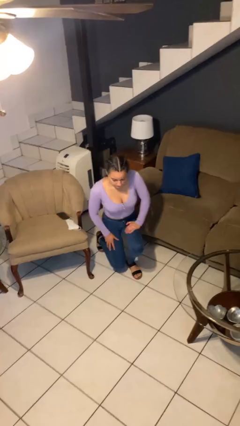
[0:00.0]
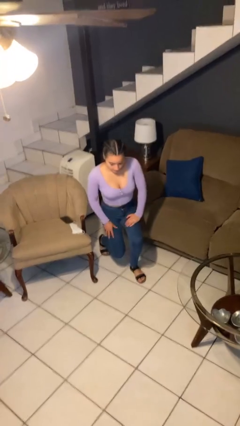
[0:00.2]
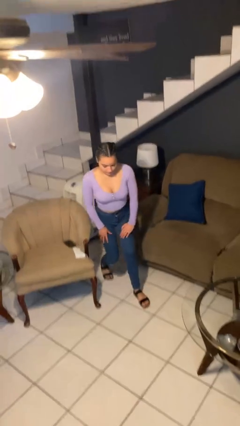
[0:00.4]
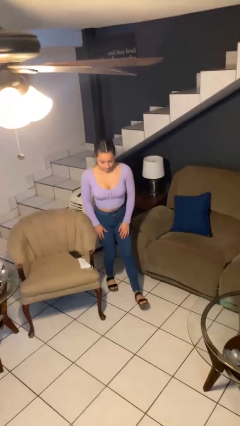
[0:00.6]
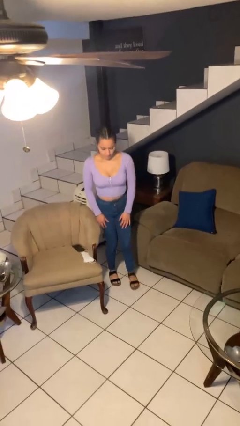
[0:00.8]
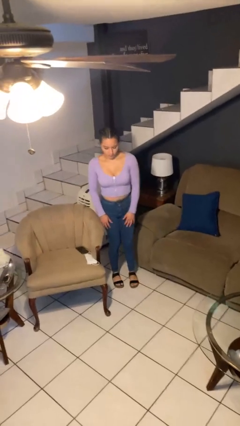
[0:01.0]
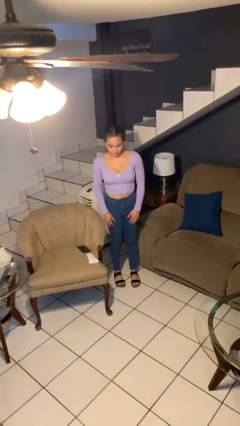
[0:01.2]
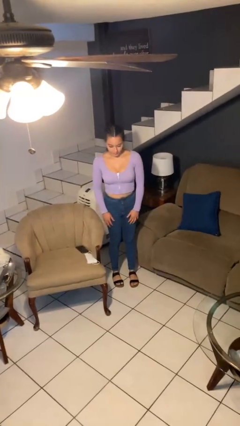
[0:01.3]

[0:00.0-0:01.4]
person stands up from floor

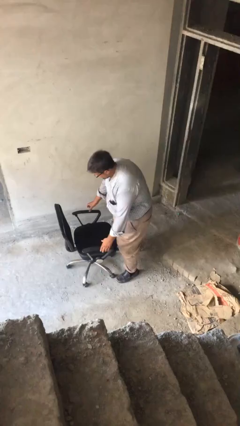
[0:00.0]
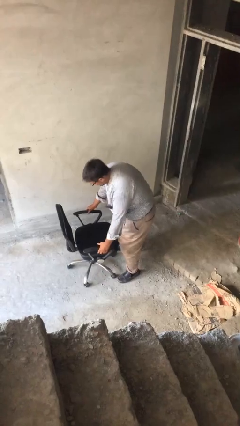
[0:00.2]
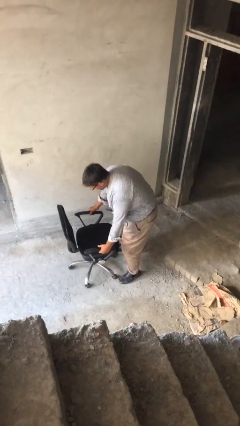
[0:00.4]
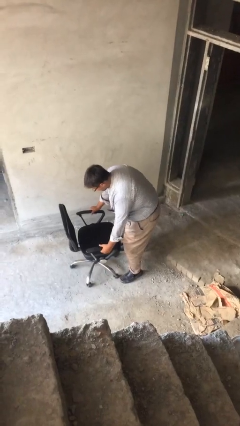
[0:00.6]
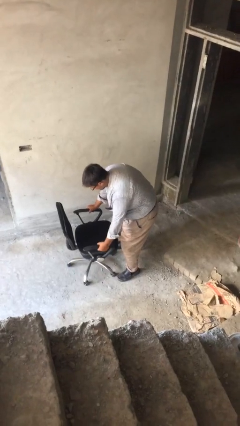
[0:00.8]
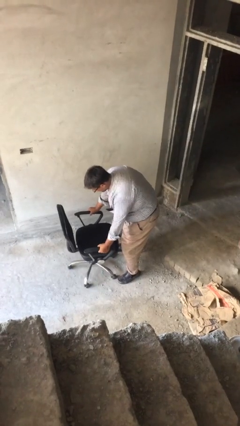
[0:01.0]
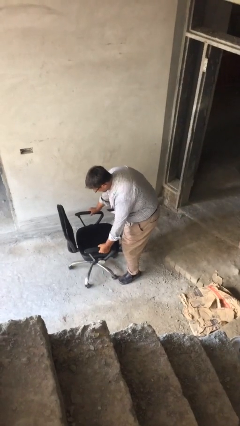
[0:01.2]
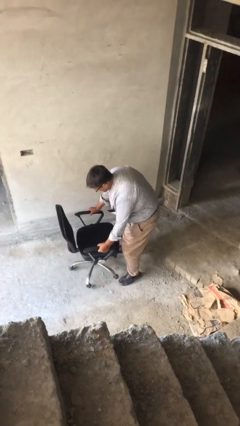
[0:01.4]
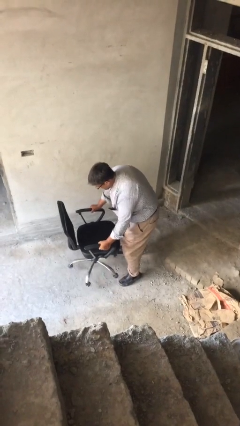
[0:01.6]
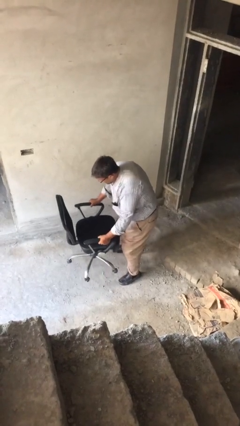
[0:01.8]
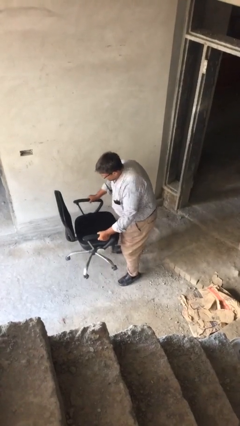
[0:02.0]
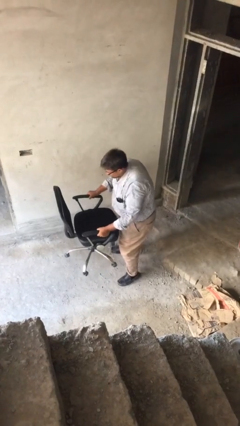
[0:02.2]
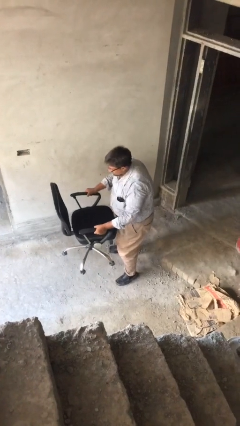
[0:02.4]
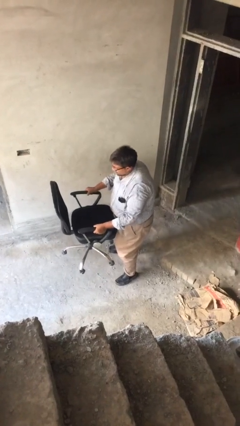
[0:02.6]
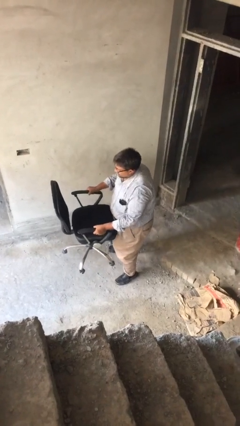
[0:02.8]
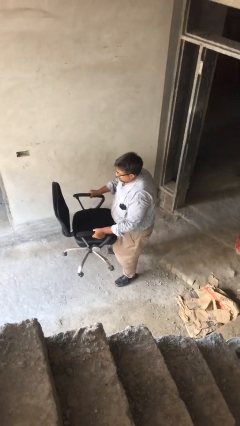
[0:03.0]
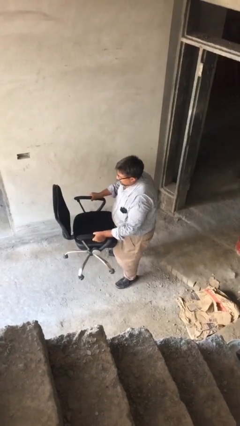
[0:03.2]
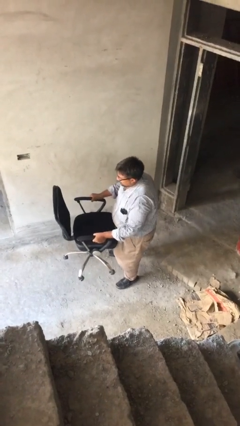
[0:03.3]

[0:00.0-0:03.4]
person picks up object from floor

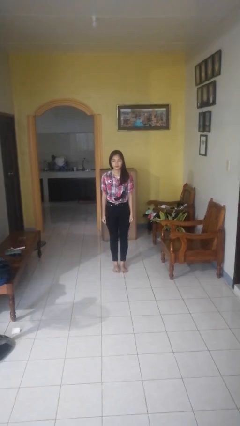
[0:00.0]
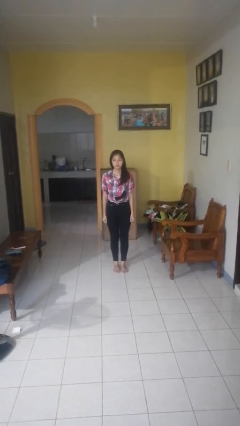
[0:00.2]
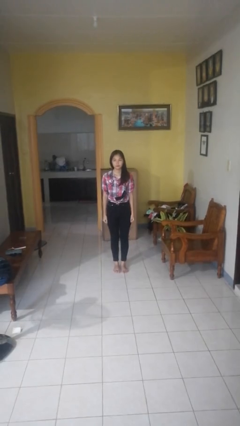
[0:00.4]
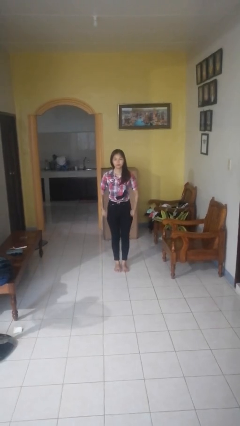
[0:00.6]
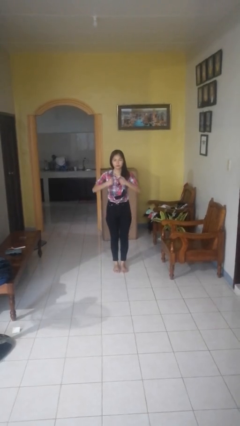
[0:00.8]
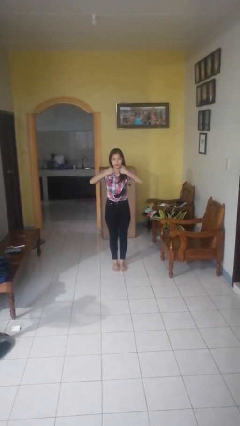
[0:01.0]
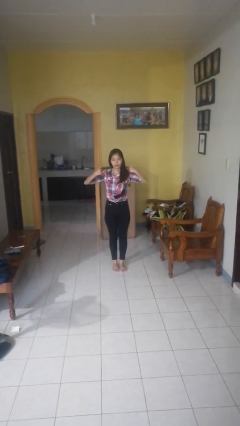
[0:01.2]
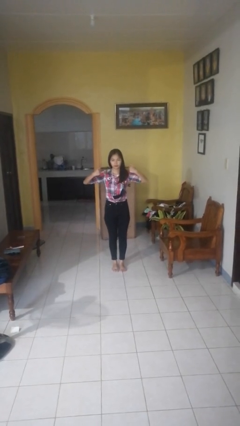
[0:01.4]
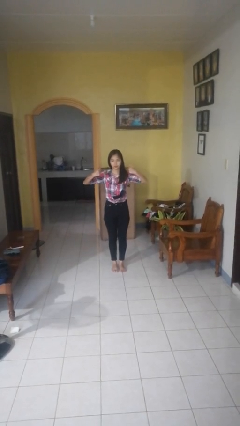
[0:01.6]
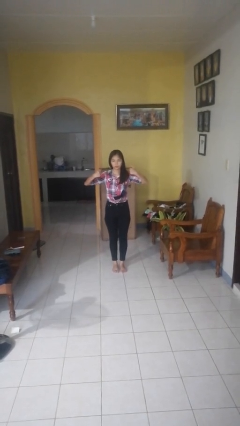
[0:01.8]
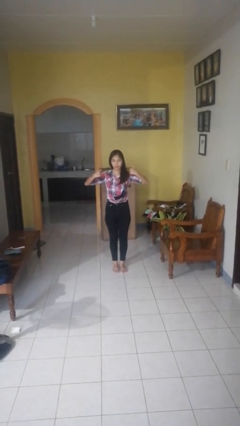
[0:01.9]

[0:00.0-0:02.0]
person gestures zoom in

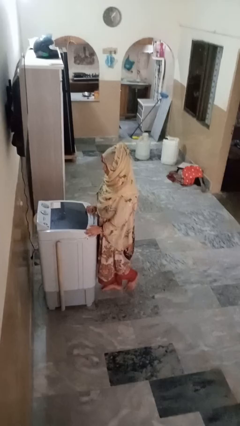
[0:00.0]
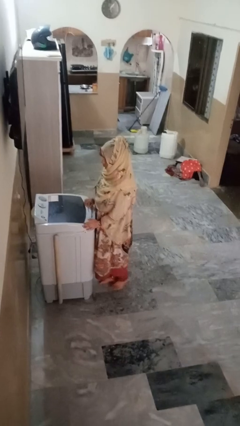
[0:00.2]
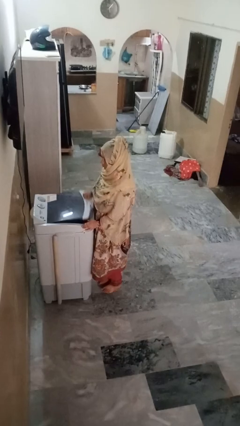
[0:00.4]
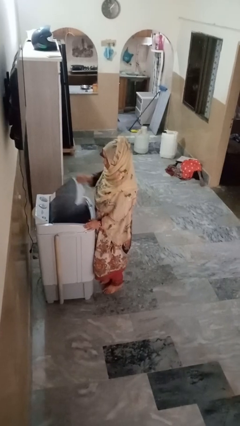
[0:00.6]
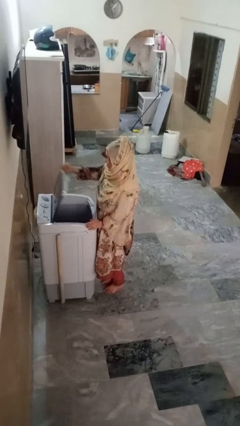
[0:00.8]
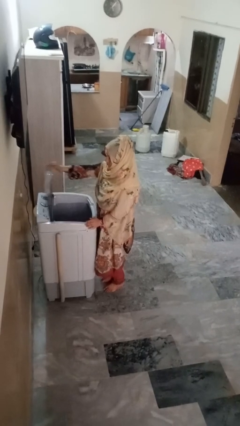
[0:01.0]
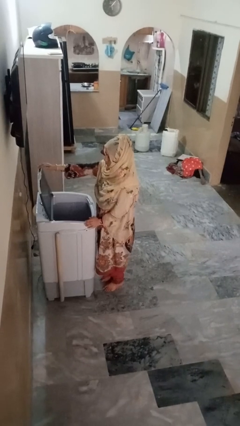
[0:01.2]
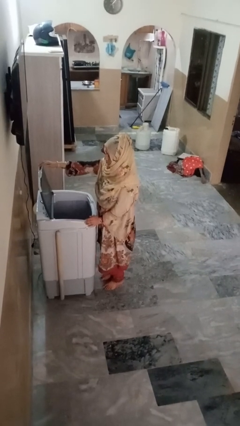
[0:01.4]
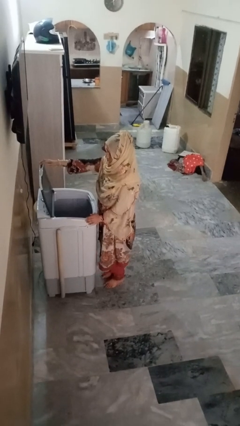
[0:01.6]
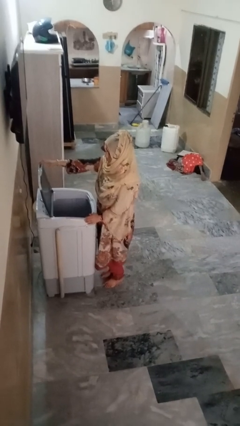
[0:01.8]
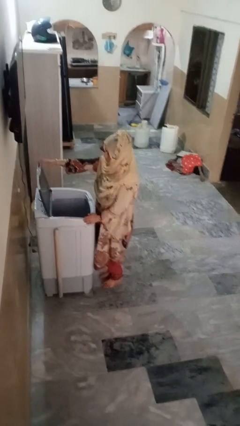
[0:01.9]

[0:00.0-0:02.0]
person opens clothes washer

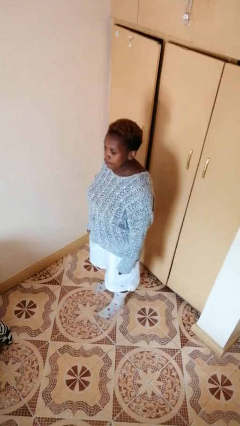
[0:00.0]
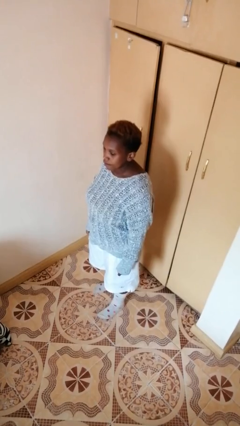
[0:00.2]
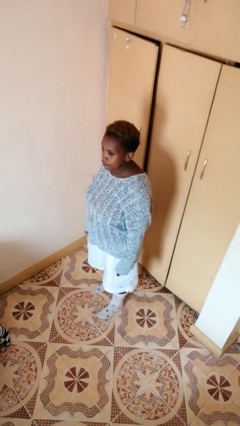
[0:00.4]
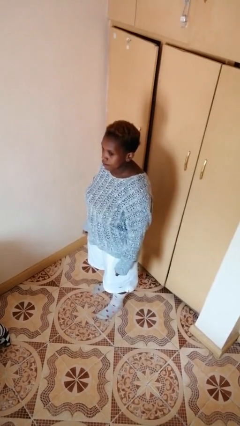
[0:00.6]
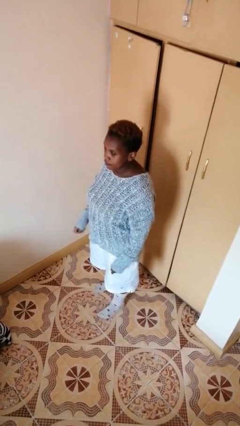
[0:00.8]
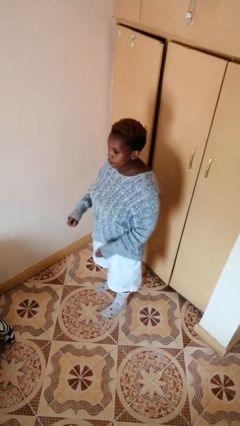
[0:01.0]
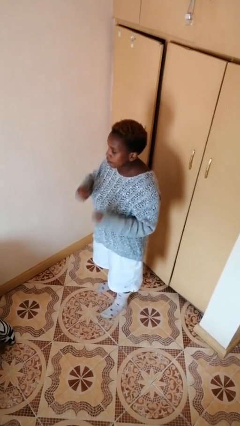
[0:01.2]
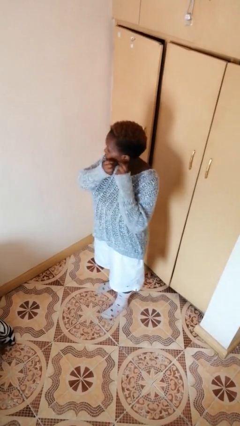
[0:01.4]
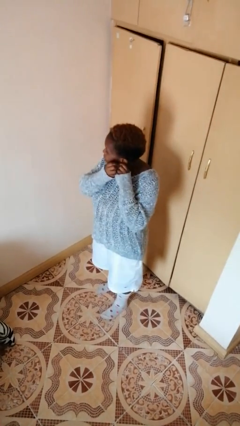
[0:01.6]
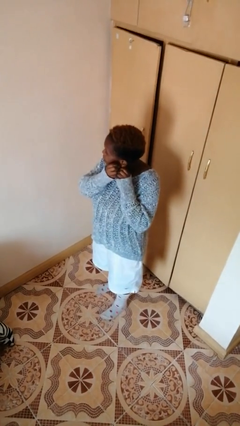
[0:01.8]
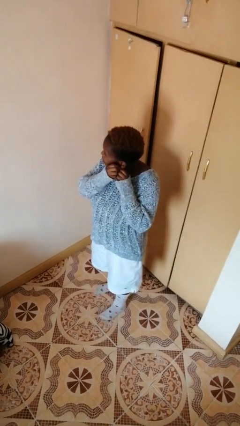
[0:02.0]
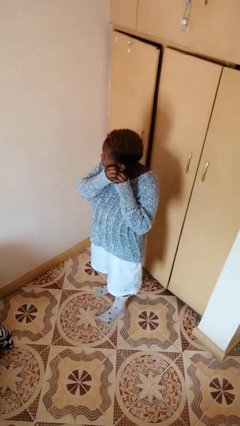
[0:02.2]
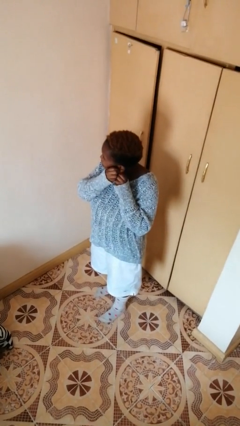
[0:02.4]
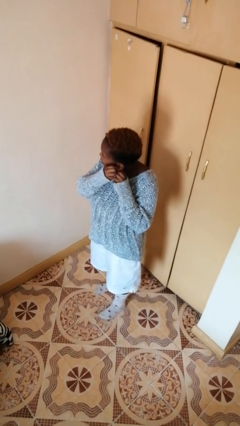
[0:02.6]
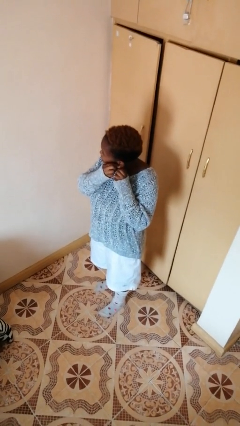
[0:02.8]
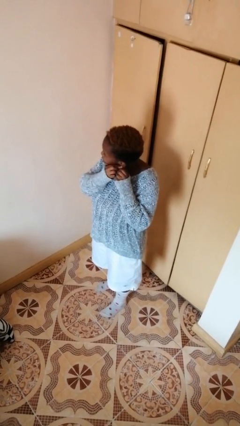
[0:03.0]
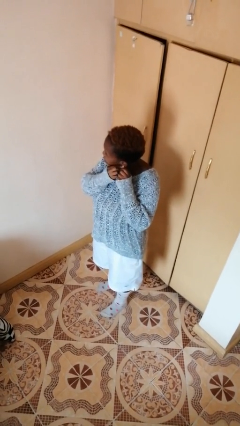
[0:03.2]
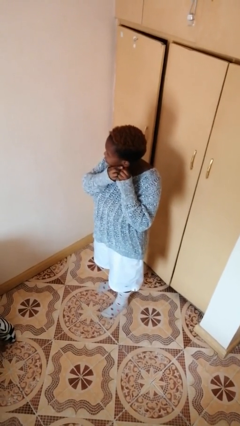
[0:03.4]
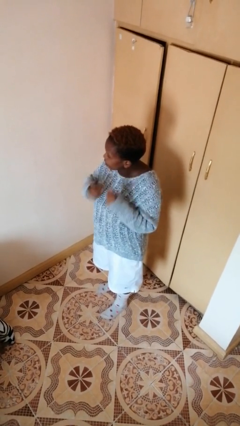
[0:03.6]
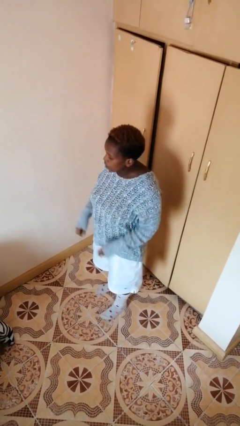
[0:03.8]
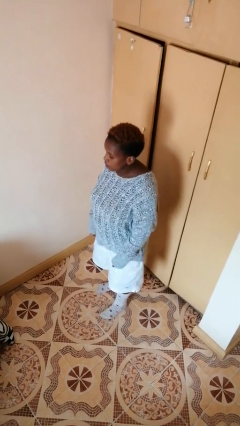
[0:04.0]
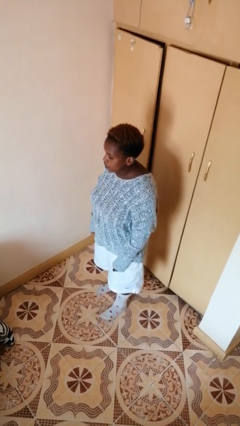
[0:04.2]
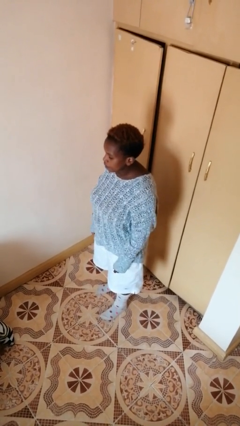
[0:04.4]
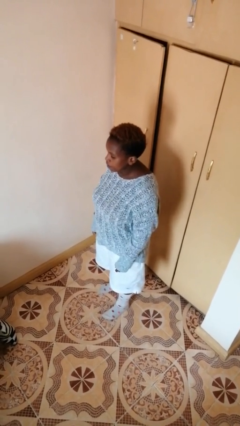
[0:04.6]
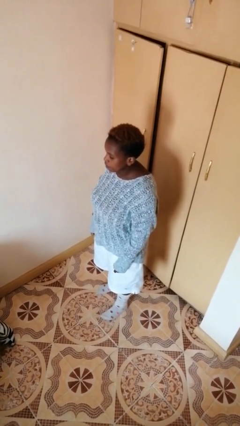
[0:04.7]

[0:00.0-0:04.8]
person puts on earrings

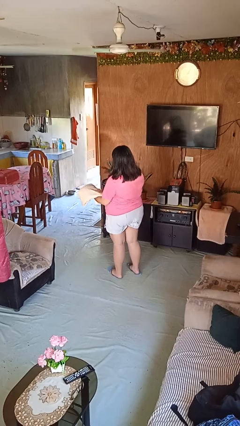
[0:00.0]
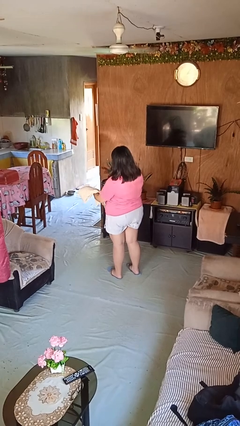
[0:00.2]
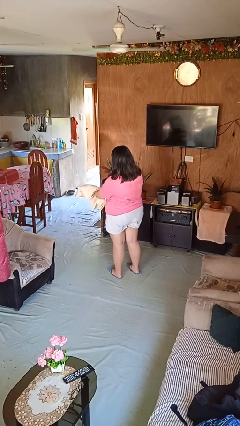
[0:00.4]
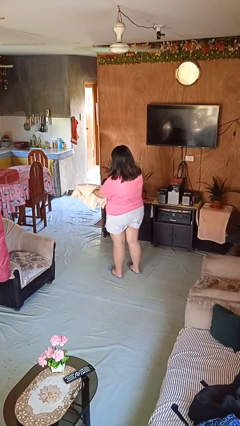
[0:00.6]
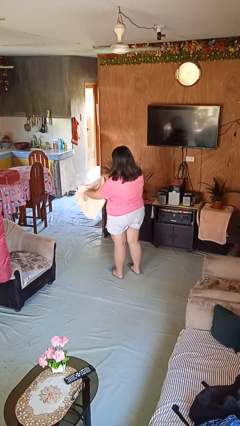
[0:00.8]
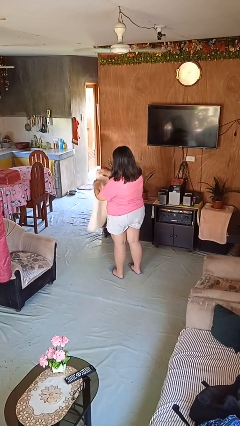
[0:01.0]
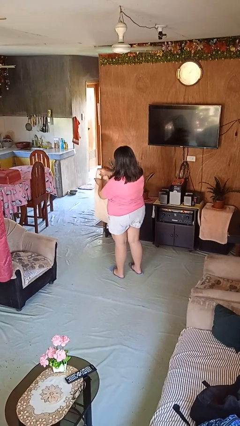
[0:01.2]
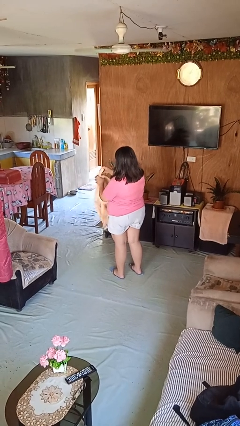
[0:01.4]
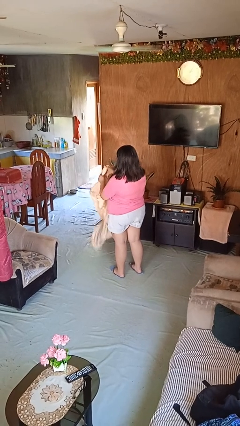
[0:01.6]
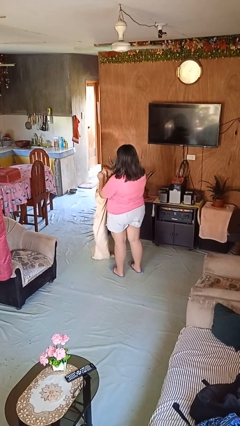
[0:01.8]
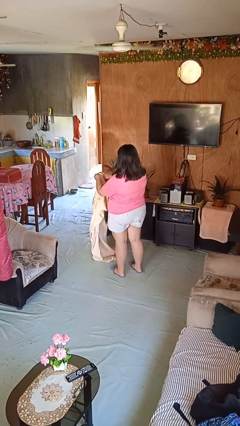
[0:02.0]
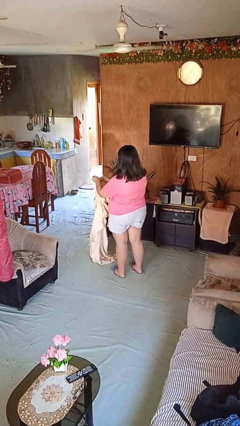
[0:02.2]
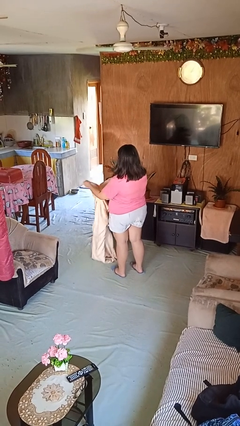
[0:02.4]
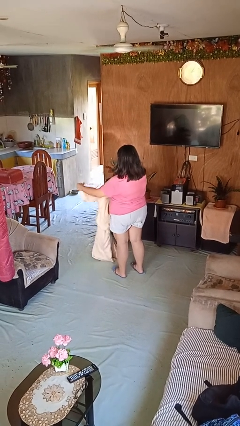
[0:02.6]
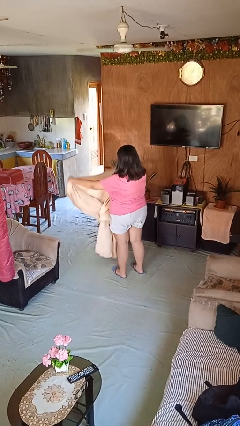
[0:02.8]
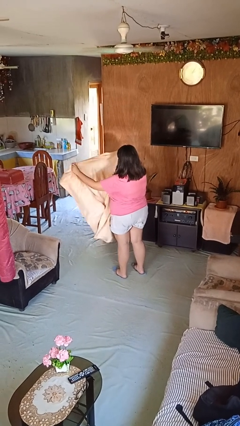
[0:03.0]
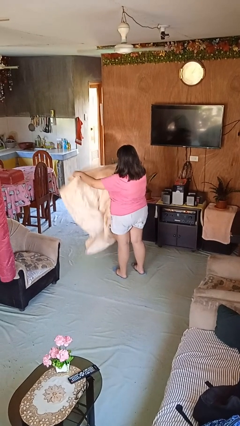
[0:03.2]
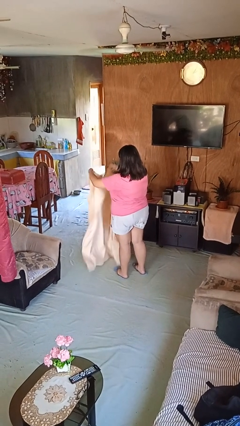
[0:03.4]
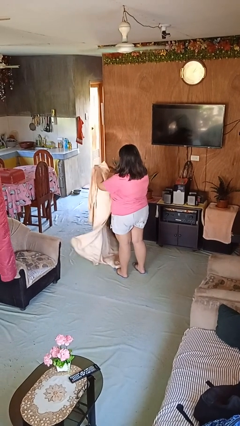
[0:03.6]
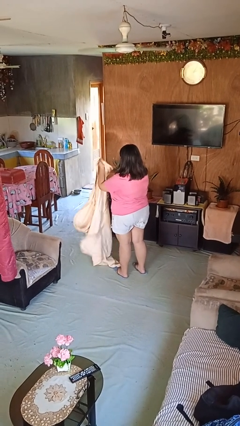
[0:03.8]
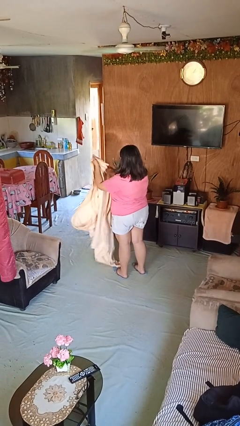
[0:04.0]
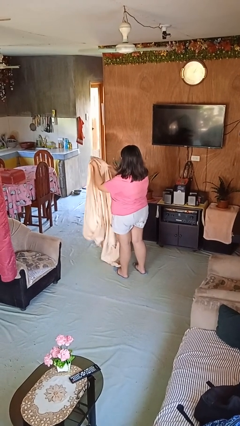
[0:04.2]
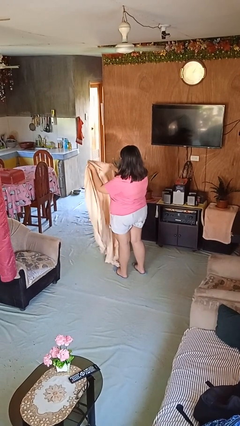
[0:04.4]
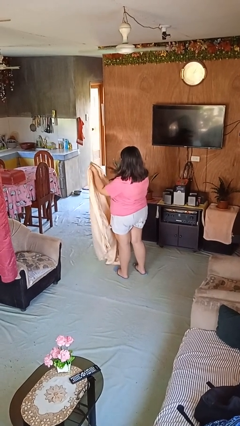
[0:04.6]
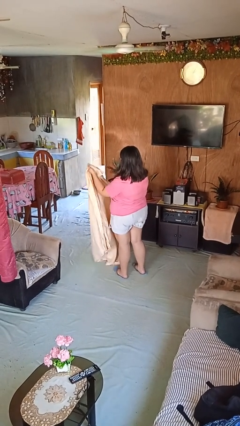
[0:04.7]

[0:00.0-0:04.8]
person unfolds blanket
